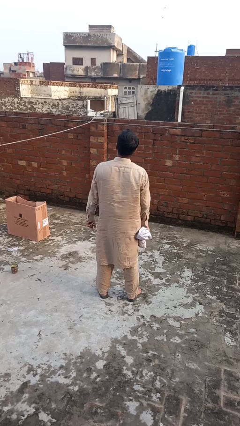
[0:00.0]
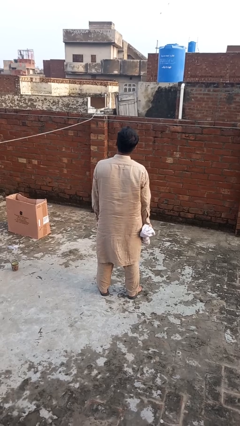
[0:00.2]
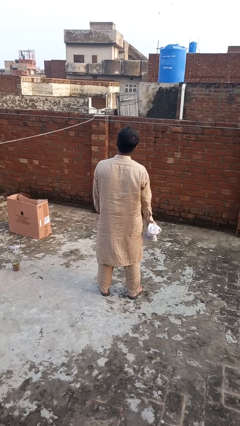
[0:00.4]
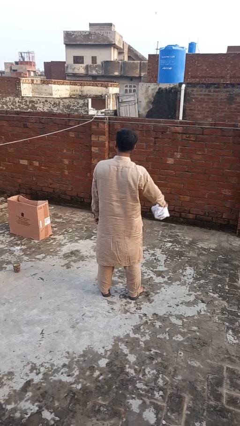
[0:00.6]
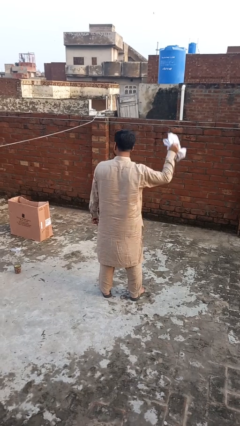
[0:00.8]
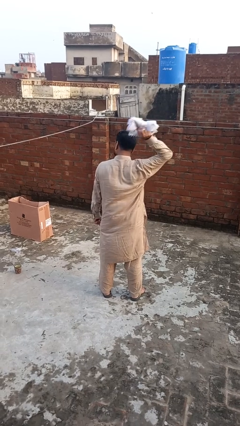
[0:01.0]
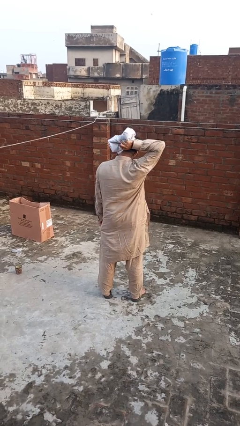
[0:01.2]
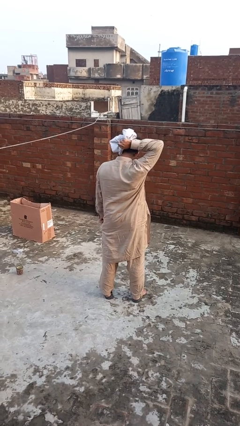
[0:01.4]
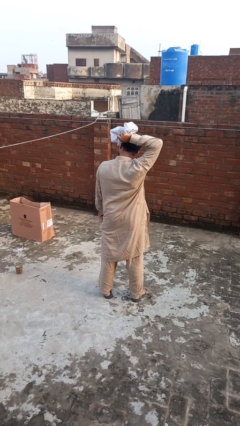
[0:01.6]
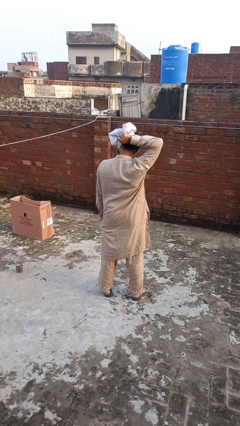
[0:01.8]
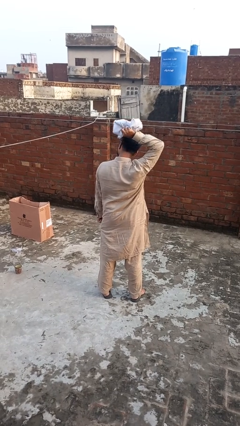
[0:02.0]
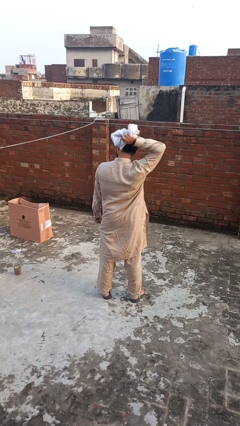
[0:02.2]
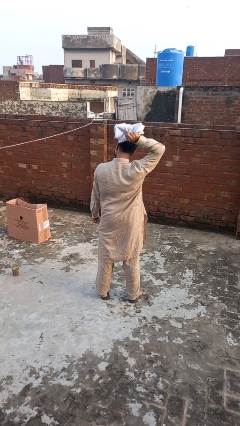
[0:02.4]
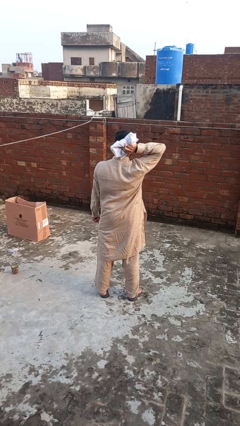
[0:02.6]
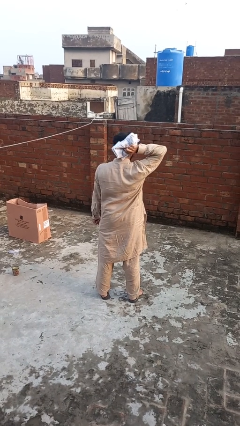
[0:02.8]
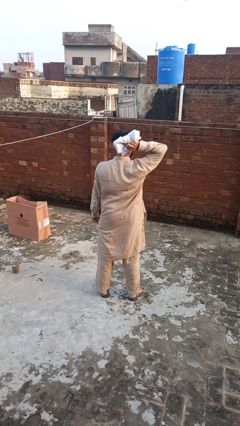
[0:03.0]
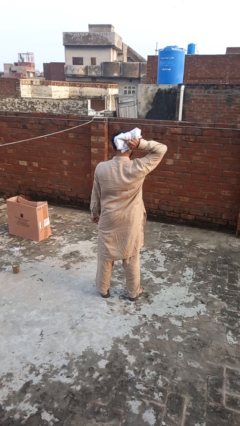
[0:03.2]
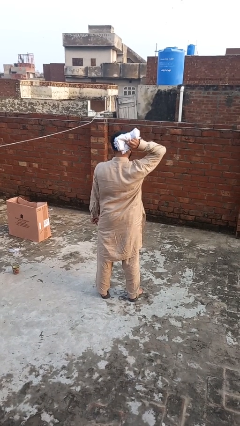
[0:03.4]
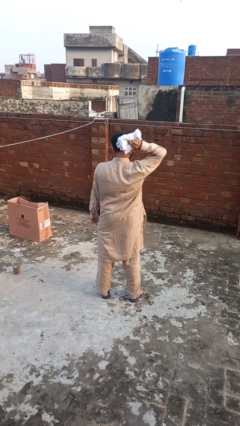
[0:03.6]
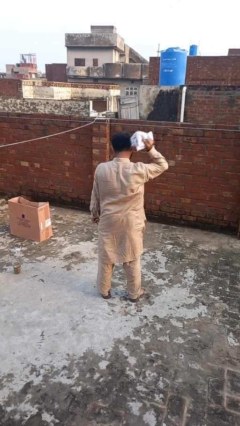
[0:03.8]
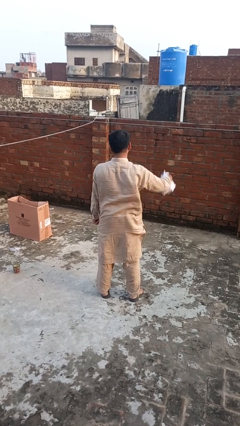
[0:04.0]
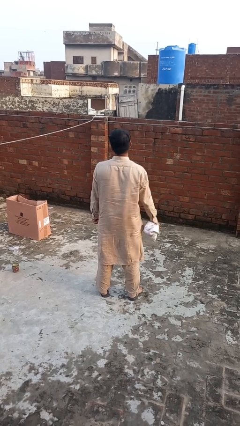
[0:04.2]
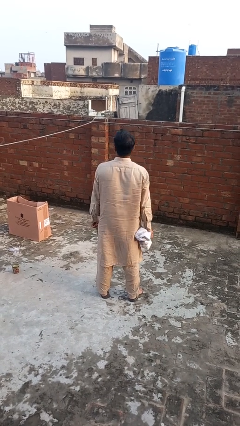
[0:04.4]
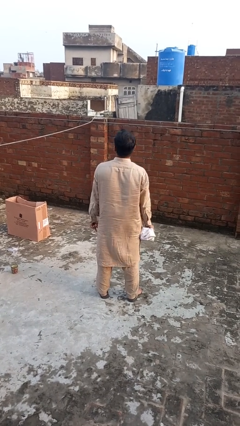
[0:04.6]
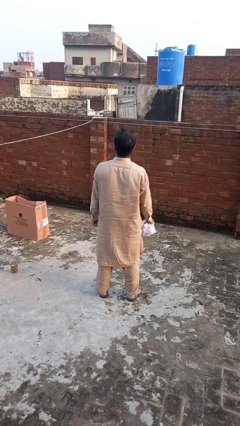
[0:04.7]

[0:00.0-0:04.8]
person dries hair with towel

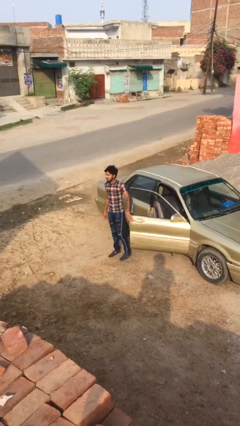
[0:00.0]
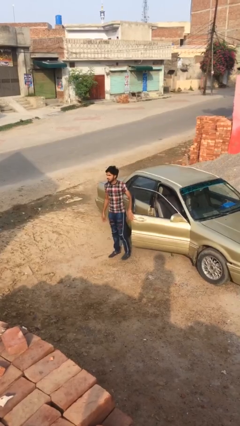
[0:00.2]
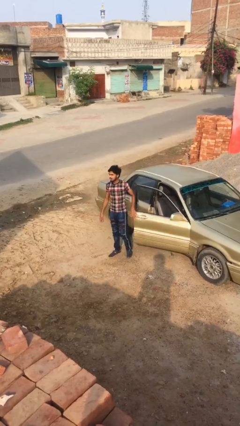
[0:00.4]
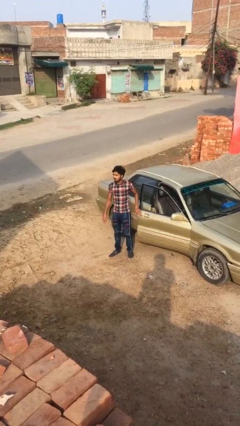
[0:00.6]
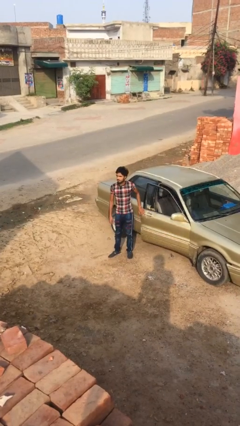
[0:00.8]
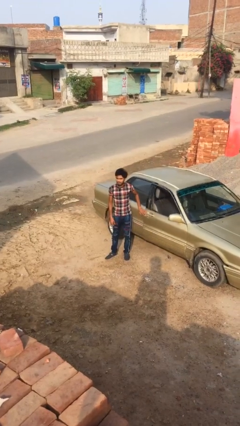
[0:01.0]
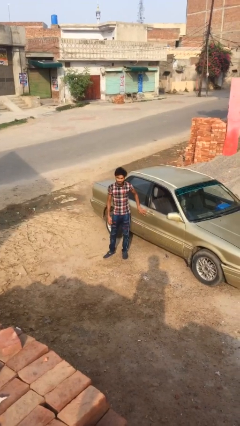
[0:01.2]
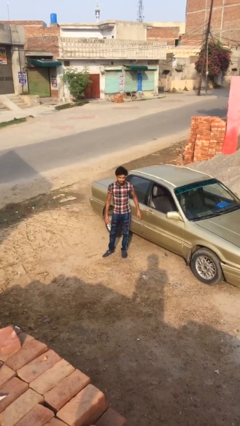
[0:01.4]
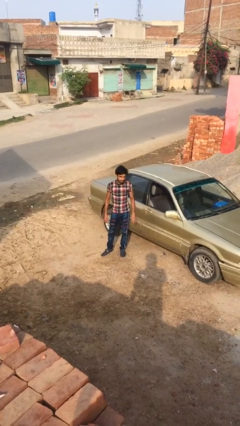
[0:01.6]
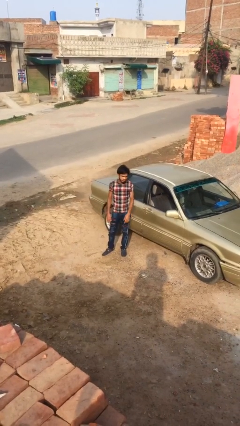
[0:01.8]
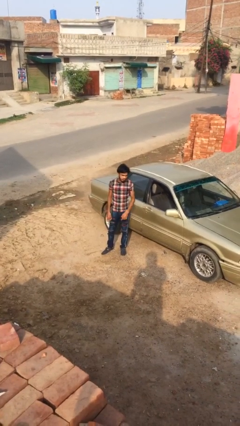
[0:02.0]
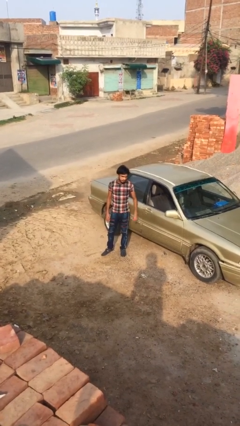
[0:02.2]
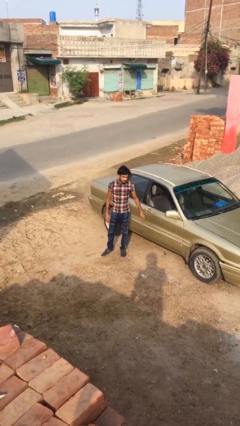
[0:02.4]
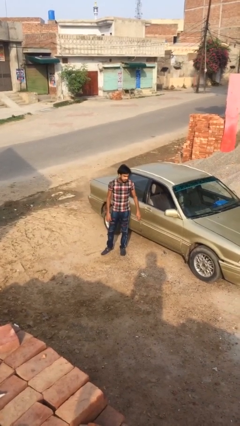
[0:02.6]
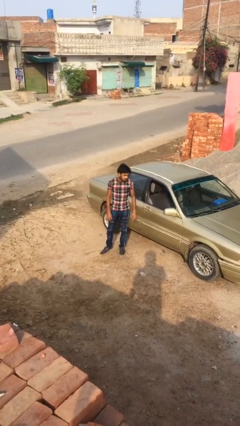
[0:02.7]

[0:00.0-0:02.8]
person closes car door

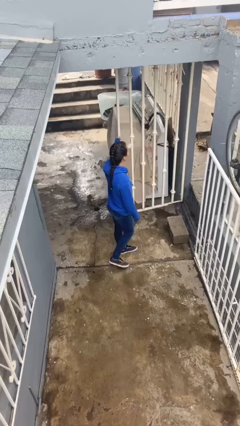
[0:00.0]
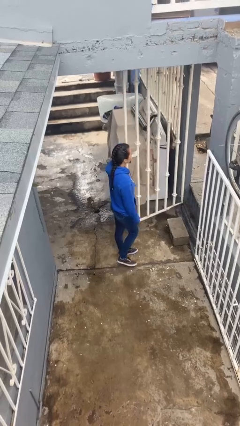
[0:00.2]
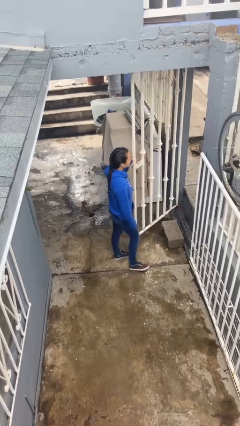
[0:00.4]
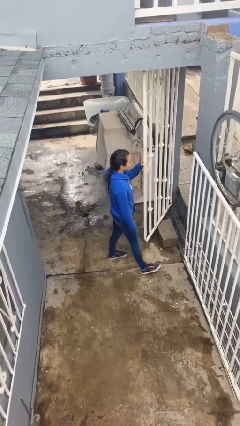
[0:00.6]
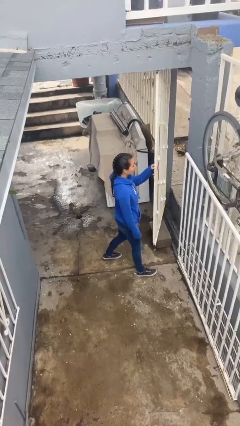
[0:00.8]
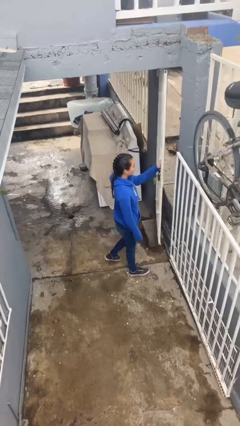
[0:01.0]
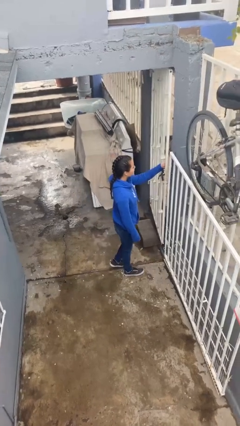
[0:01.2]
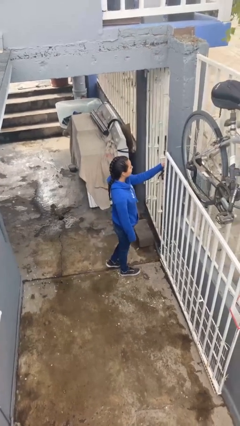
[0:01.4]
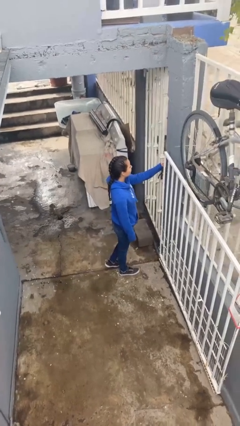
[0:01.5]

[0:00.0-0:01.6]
person closes facility door

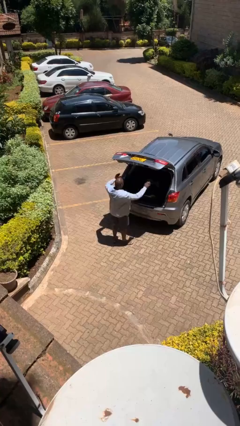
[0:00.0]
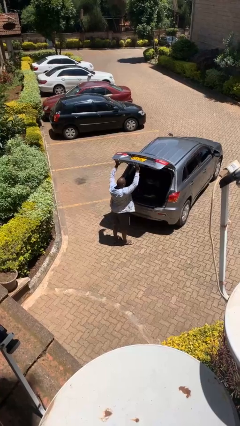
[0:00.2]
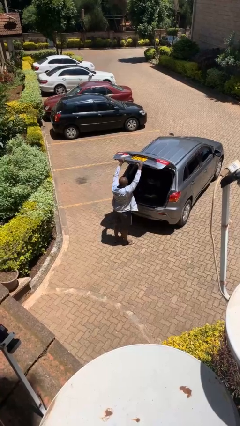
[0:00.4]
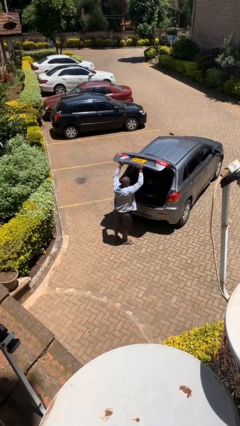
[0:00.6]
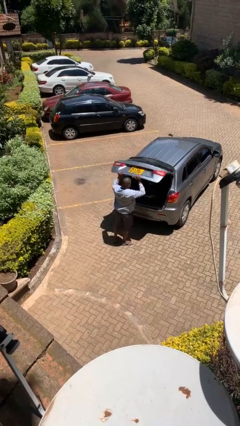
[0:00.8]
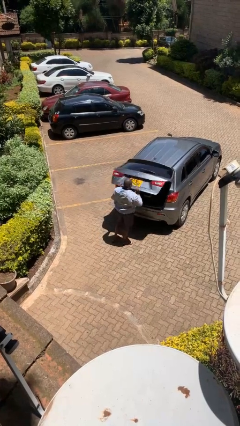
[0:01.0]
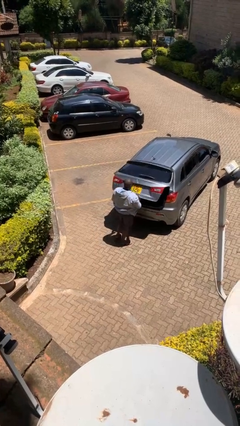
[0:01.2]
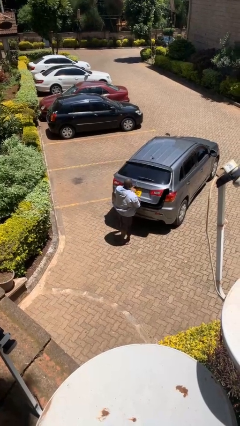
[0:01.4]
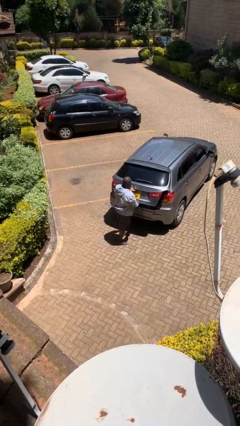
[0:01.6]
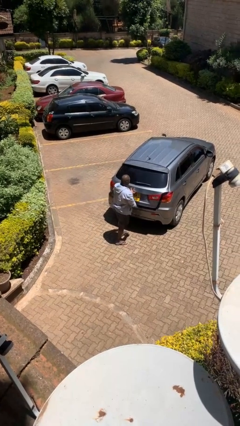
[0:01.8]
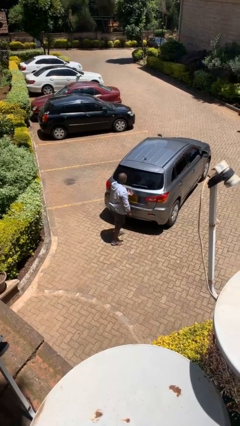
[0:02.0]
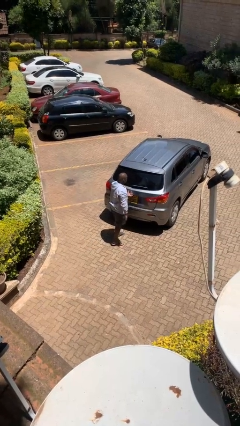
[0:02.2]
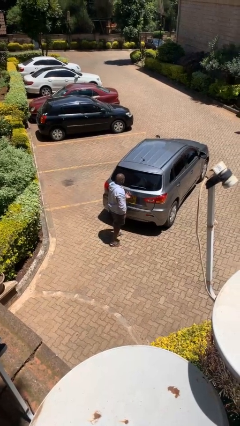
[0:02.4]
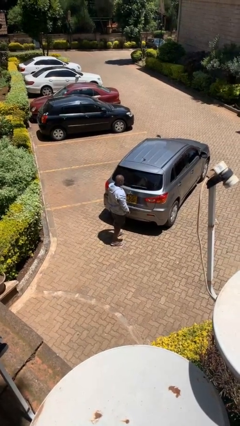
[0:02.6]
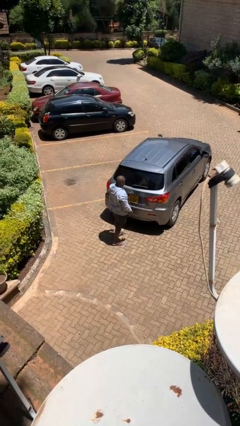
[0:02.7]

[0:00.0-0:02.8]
person closes car trunk

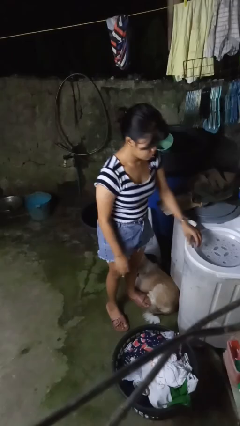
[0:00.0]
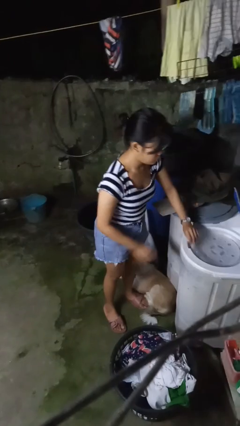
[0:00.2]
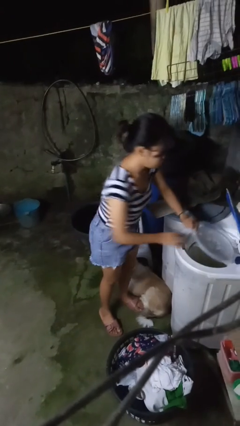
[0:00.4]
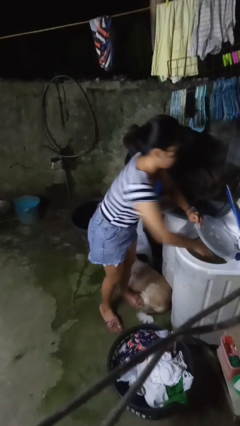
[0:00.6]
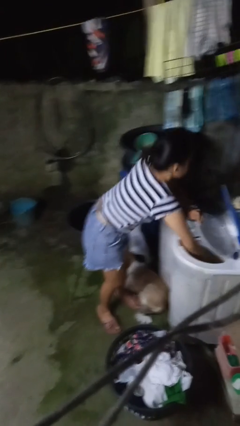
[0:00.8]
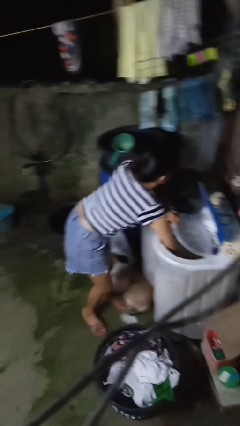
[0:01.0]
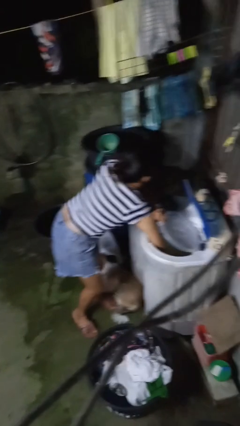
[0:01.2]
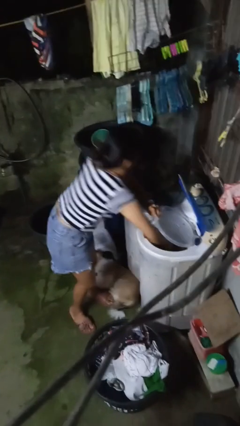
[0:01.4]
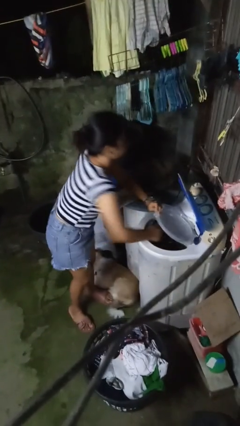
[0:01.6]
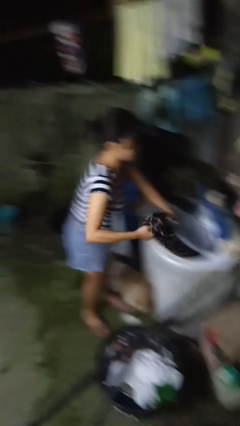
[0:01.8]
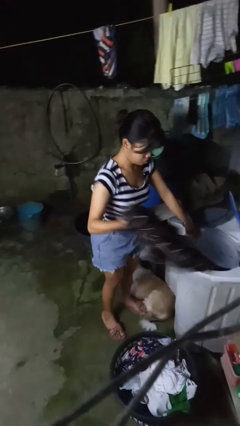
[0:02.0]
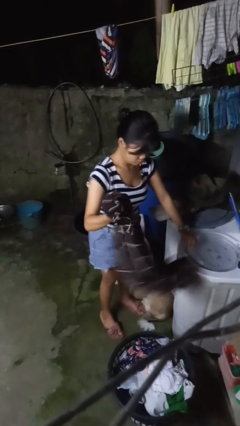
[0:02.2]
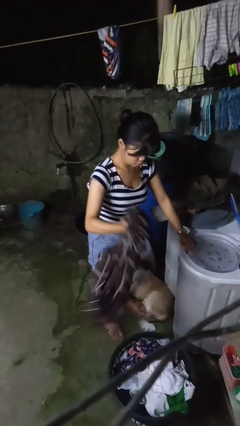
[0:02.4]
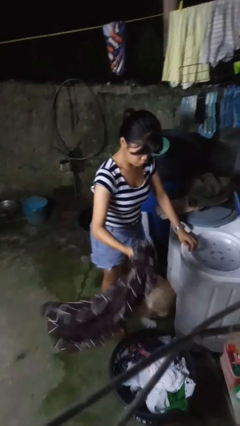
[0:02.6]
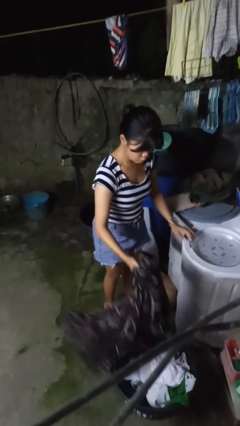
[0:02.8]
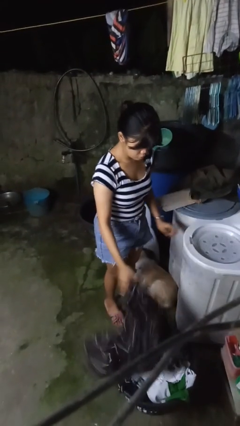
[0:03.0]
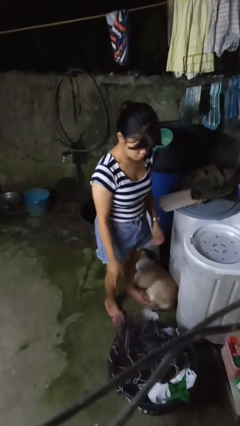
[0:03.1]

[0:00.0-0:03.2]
person unloads dryer

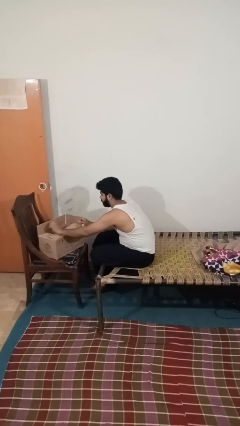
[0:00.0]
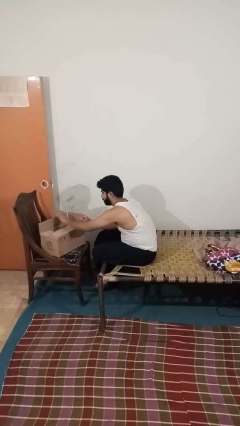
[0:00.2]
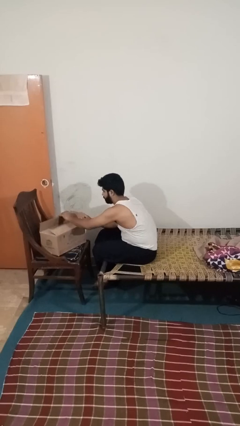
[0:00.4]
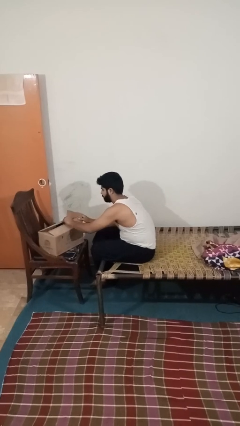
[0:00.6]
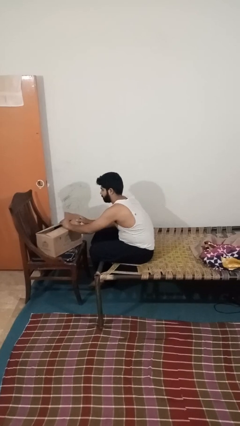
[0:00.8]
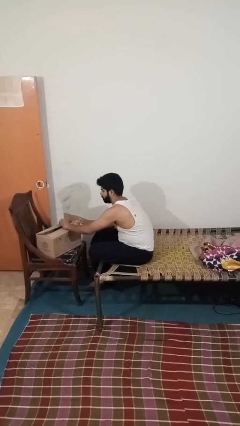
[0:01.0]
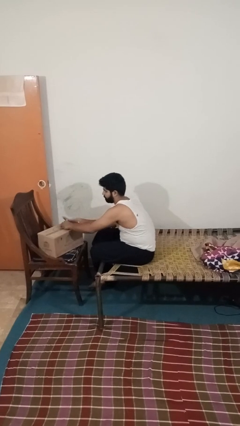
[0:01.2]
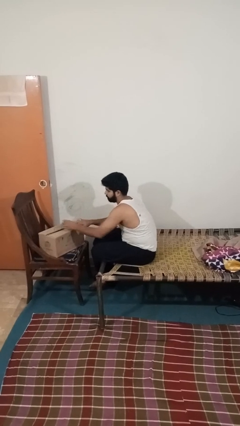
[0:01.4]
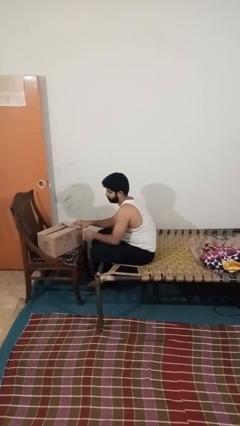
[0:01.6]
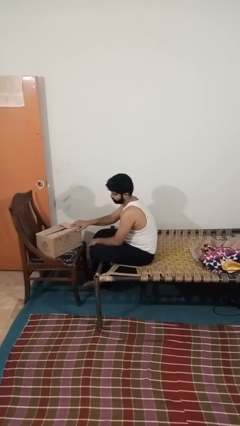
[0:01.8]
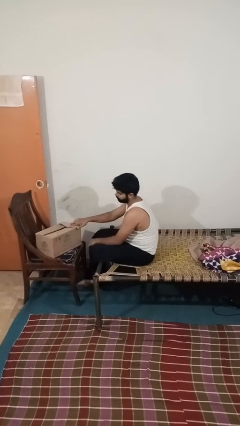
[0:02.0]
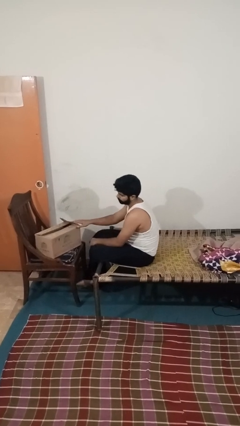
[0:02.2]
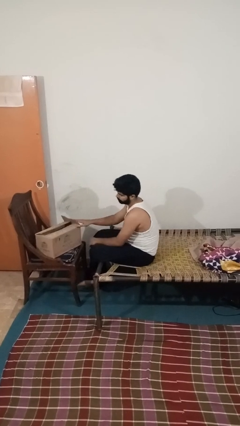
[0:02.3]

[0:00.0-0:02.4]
person closes box

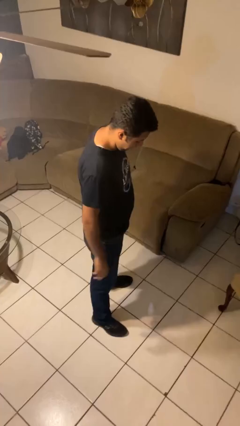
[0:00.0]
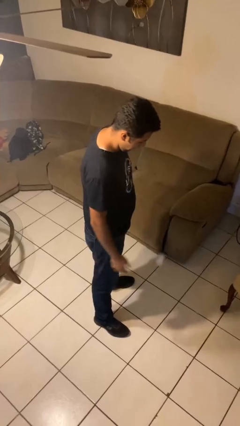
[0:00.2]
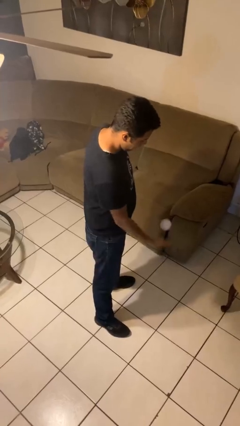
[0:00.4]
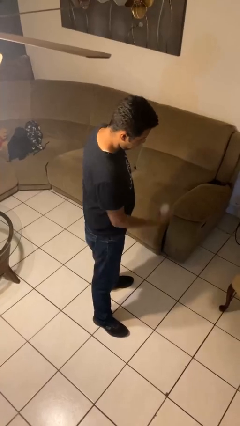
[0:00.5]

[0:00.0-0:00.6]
person bounces ball on floor
